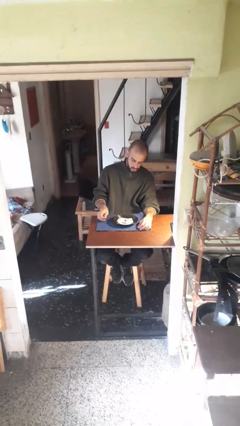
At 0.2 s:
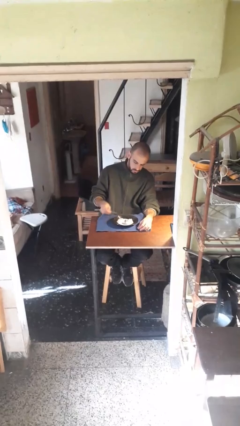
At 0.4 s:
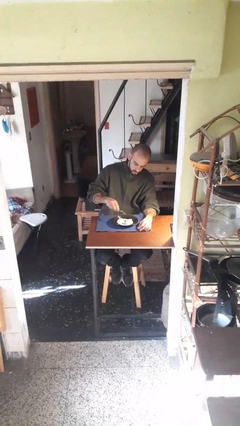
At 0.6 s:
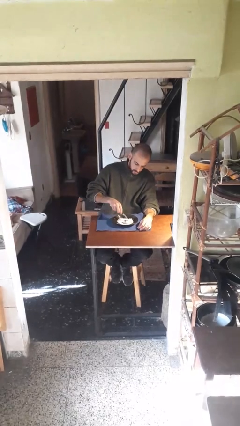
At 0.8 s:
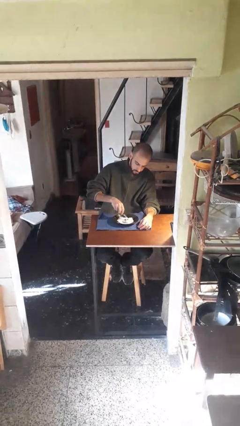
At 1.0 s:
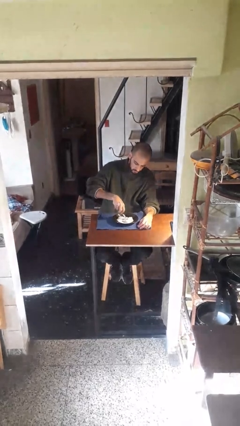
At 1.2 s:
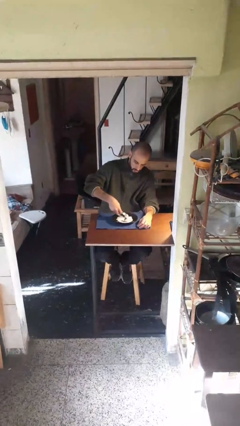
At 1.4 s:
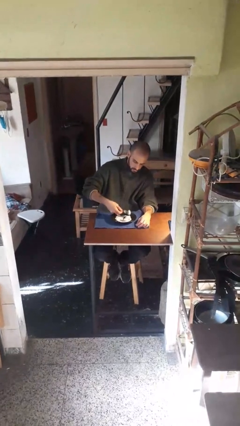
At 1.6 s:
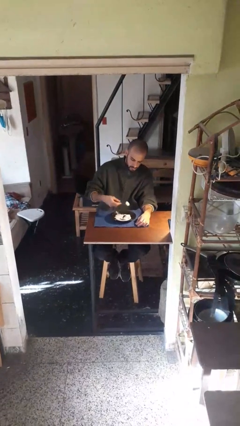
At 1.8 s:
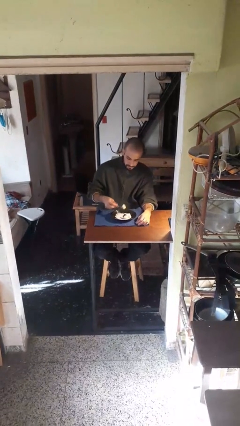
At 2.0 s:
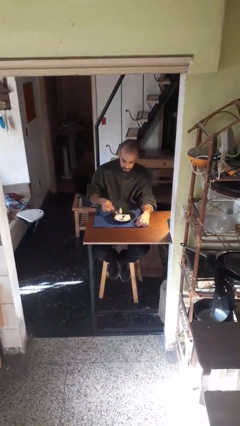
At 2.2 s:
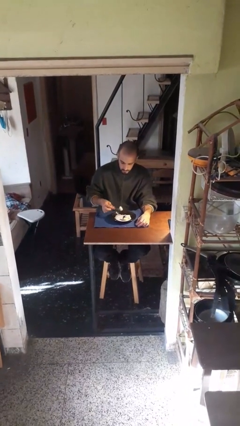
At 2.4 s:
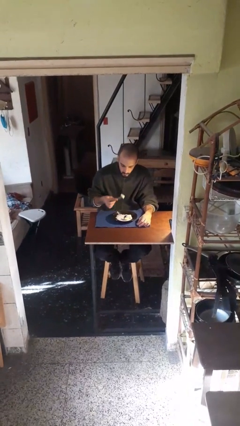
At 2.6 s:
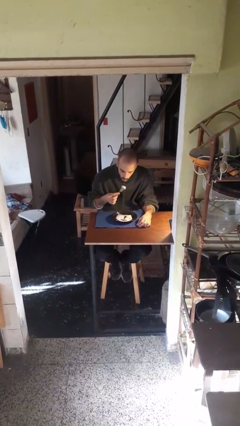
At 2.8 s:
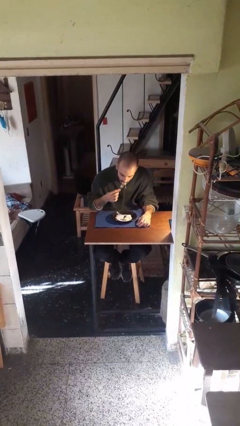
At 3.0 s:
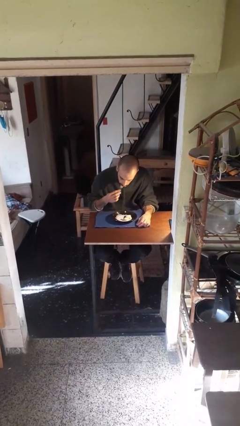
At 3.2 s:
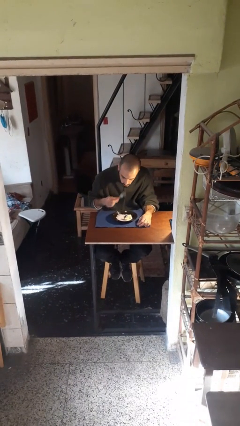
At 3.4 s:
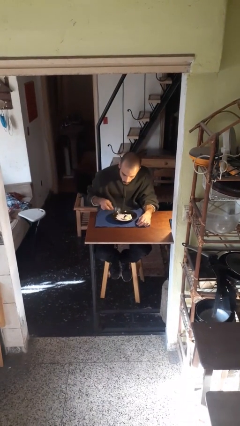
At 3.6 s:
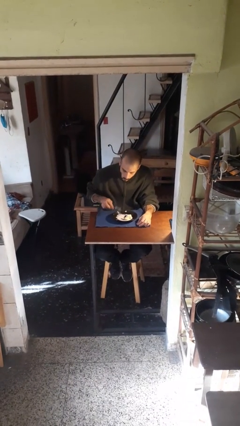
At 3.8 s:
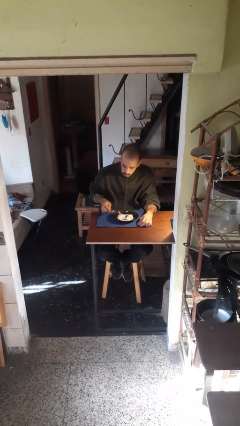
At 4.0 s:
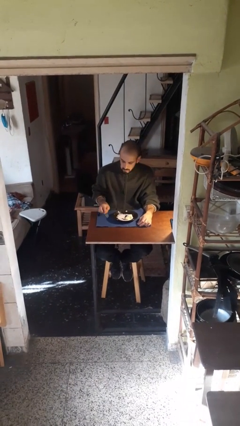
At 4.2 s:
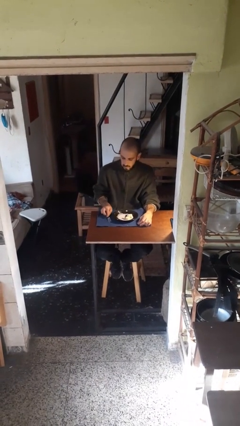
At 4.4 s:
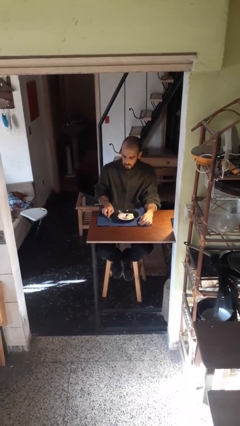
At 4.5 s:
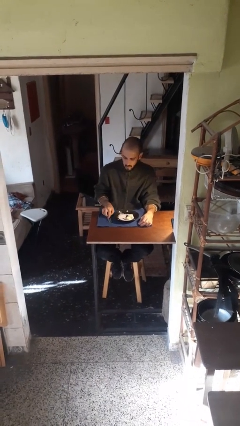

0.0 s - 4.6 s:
person eats with utensil

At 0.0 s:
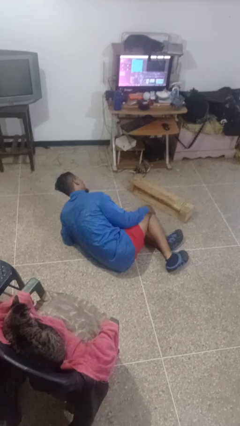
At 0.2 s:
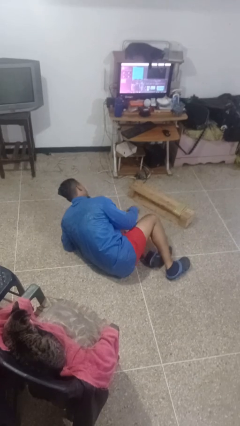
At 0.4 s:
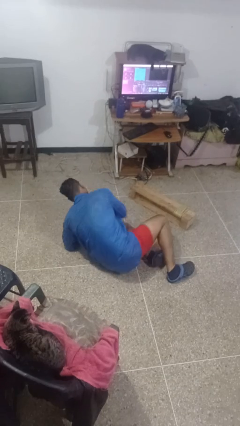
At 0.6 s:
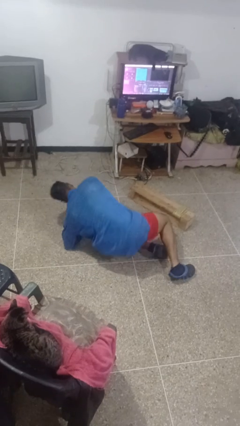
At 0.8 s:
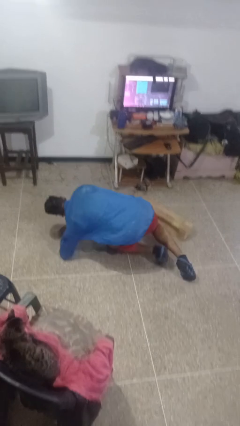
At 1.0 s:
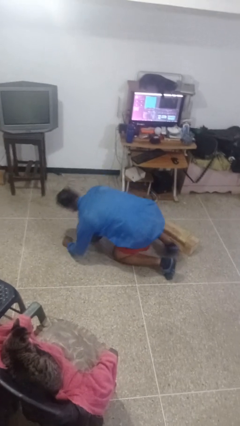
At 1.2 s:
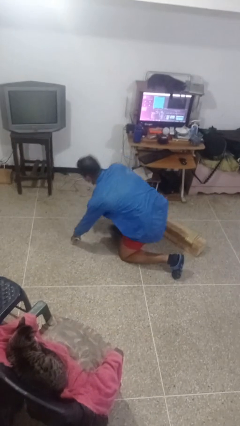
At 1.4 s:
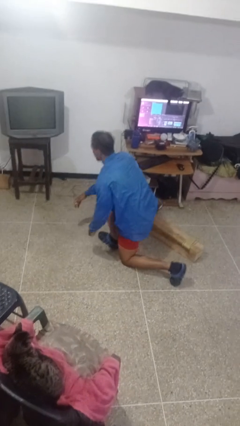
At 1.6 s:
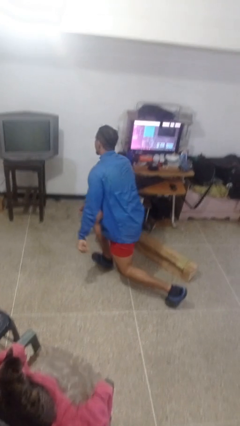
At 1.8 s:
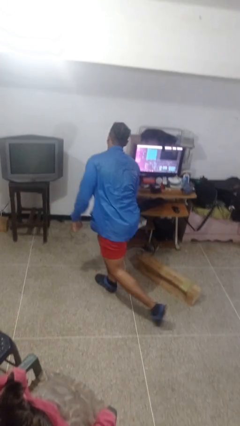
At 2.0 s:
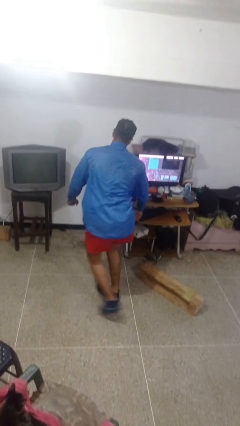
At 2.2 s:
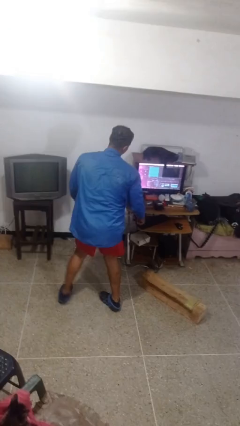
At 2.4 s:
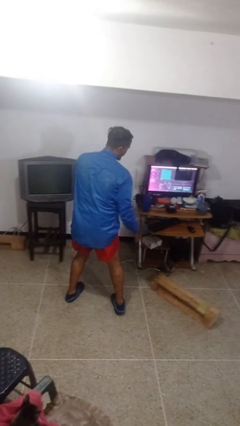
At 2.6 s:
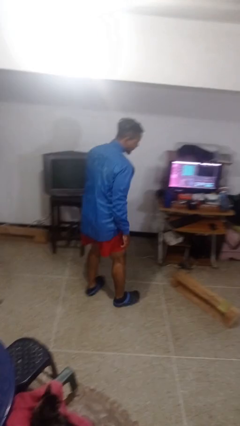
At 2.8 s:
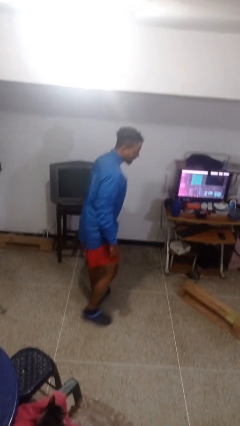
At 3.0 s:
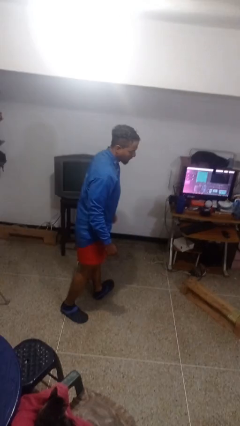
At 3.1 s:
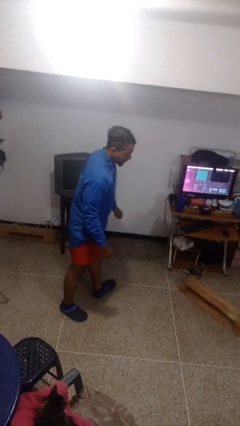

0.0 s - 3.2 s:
person stands up from floor

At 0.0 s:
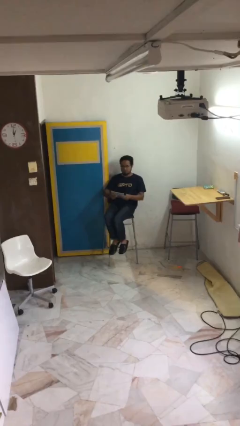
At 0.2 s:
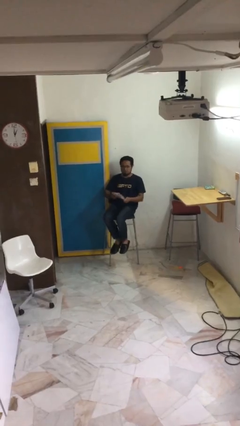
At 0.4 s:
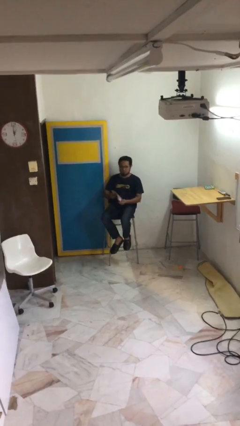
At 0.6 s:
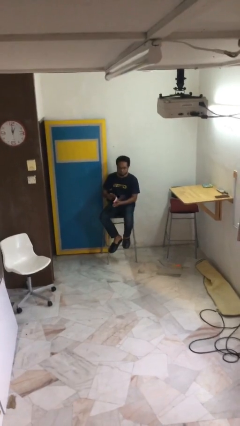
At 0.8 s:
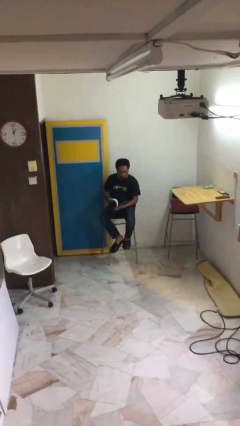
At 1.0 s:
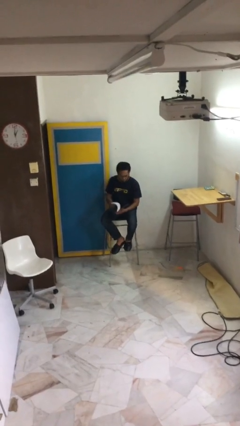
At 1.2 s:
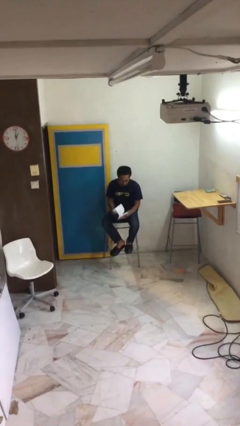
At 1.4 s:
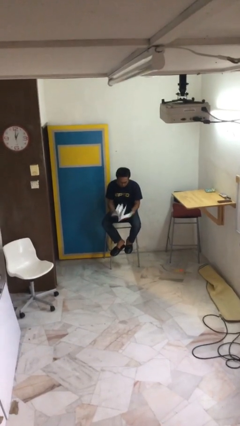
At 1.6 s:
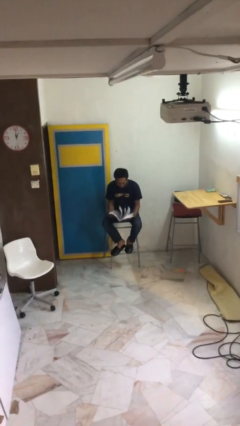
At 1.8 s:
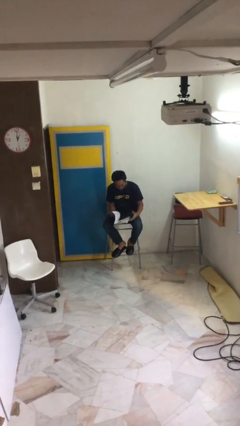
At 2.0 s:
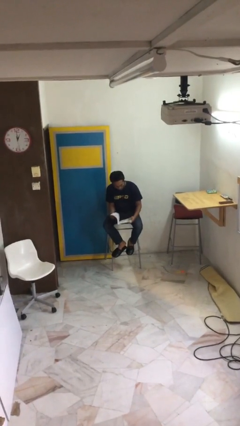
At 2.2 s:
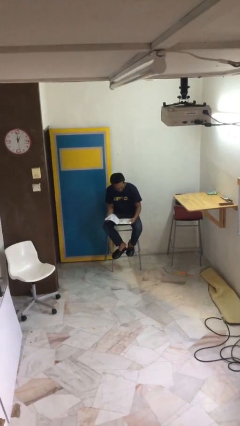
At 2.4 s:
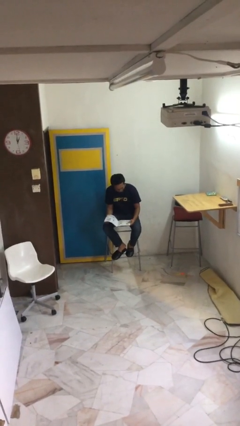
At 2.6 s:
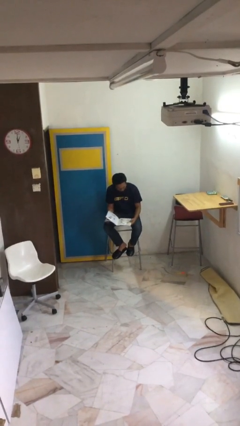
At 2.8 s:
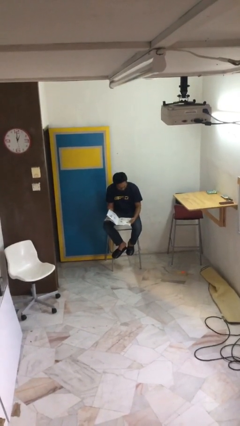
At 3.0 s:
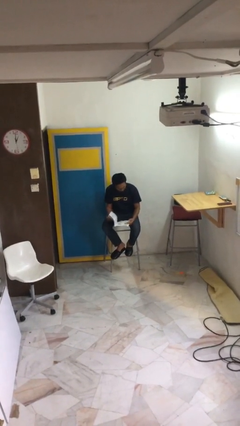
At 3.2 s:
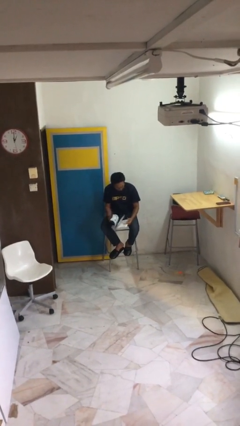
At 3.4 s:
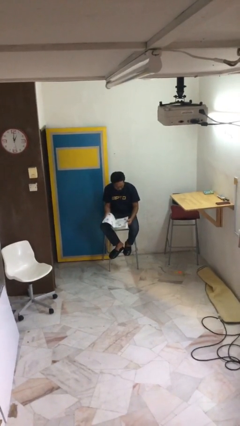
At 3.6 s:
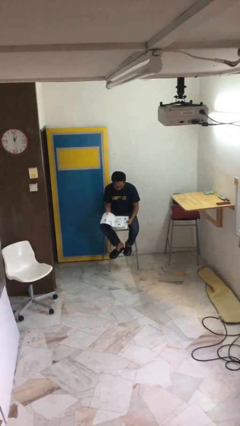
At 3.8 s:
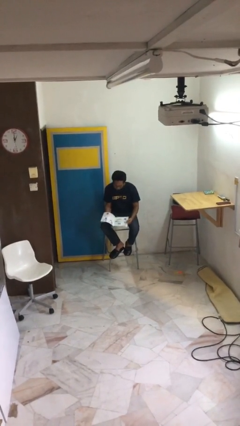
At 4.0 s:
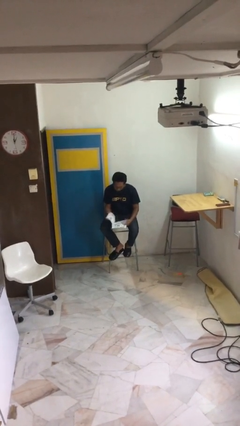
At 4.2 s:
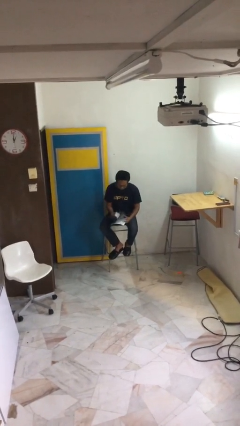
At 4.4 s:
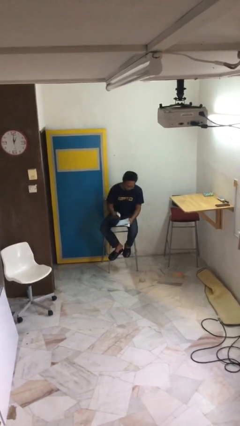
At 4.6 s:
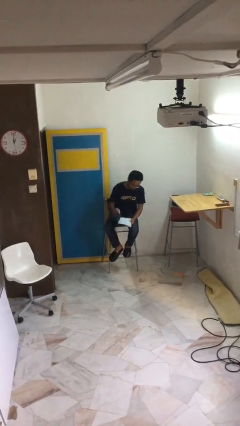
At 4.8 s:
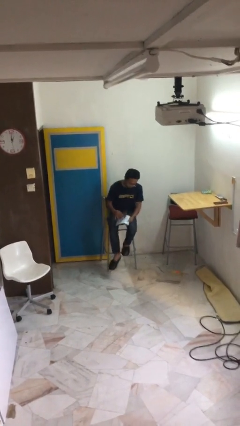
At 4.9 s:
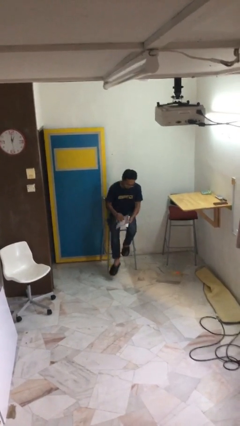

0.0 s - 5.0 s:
person reads document

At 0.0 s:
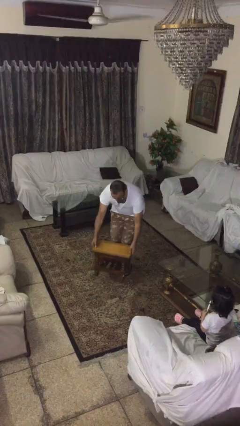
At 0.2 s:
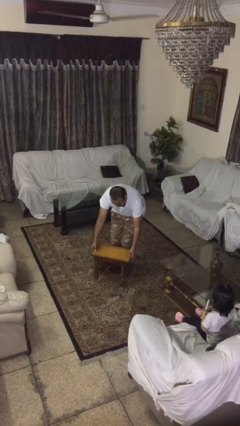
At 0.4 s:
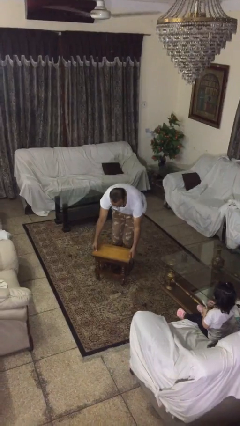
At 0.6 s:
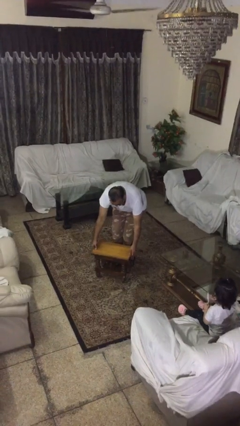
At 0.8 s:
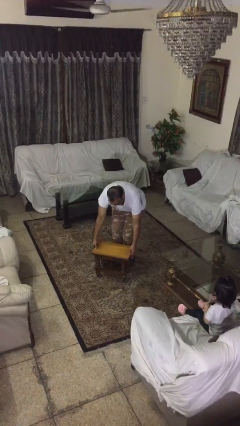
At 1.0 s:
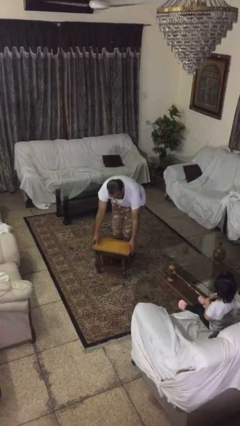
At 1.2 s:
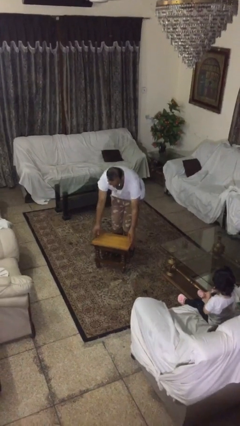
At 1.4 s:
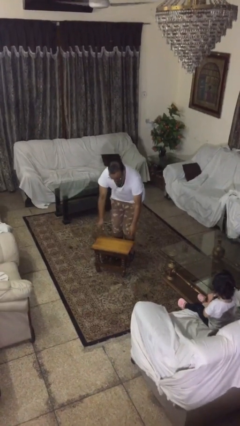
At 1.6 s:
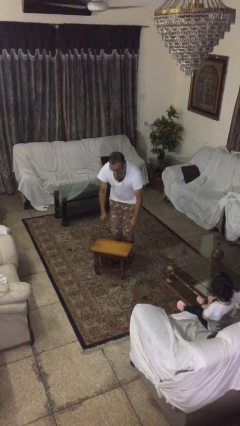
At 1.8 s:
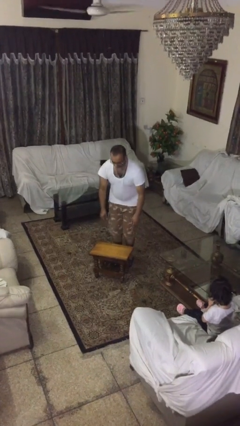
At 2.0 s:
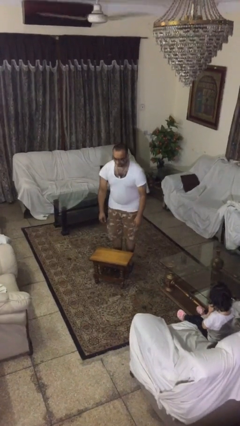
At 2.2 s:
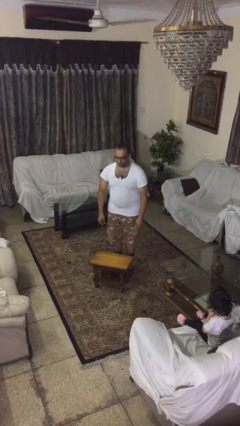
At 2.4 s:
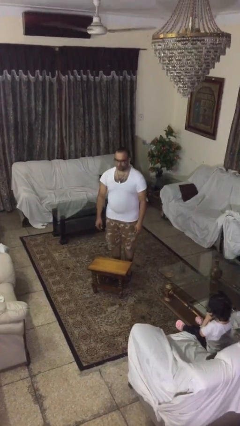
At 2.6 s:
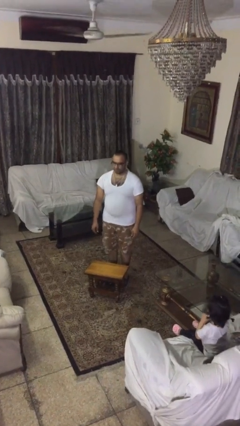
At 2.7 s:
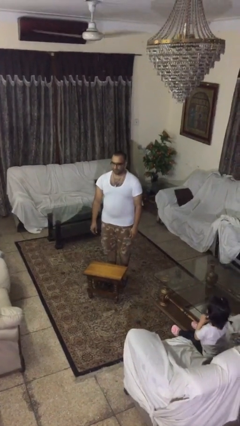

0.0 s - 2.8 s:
person picks up object from floor

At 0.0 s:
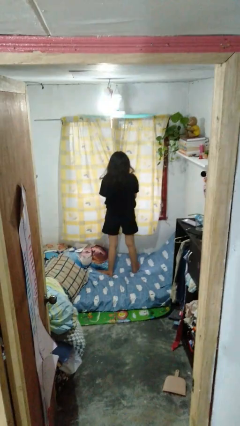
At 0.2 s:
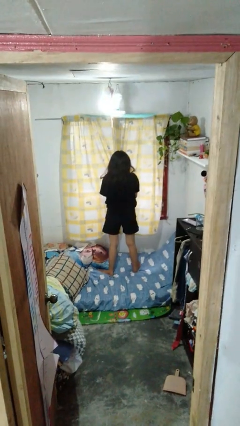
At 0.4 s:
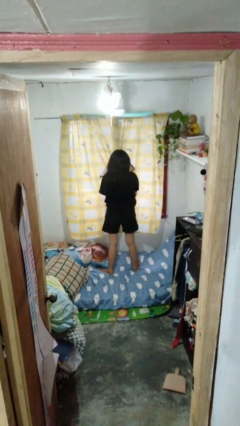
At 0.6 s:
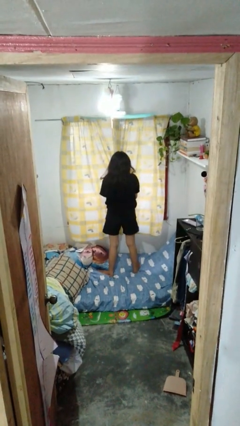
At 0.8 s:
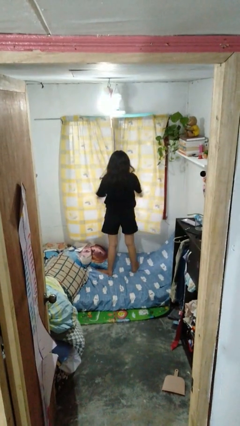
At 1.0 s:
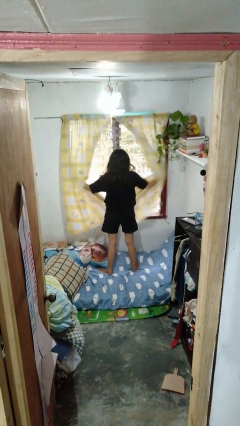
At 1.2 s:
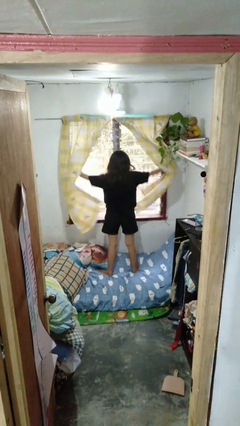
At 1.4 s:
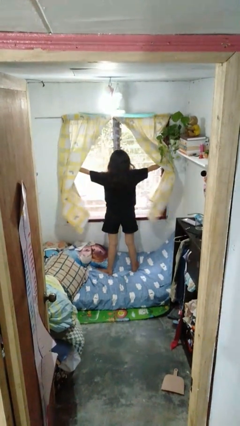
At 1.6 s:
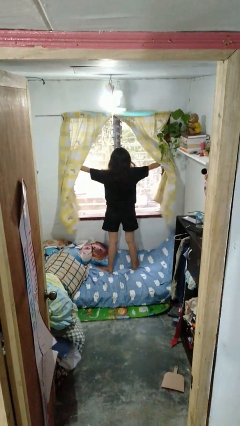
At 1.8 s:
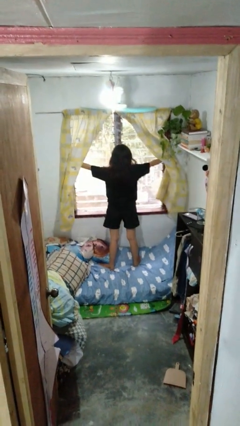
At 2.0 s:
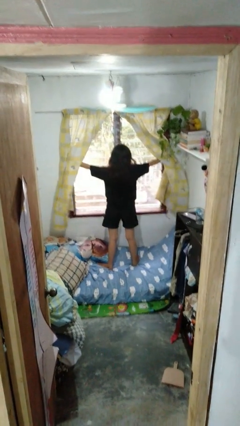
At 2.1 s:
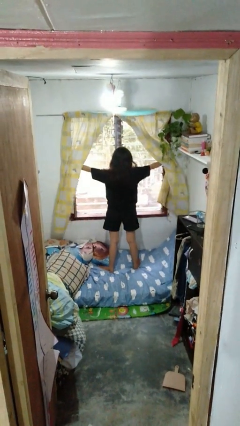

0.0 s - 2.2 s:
person opens curtains

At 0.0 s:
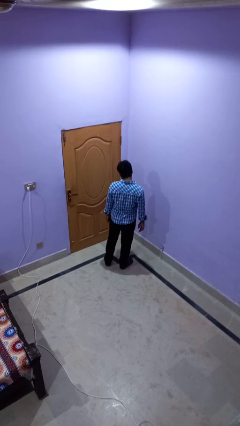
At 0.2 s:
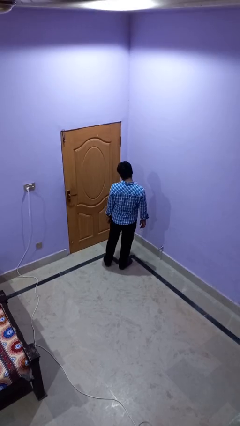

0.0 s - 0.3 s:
person shrugs
